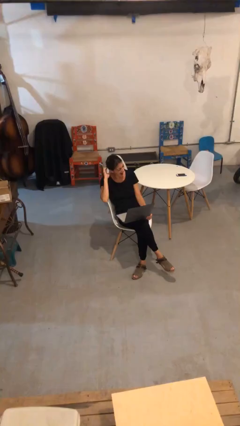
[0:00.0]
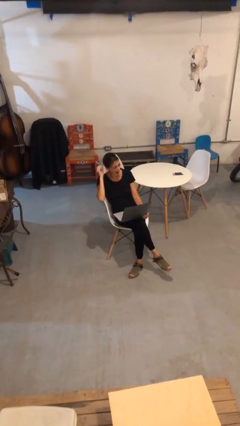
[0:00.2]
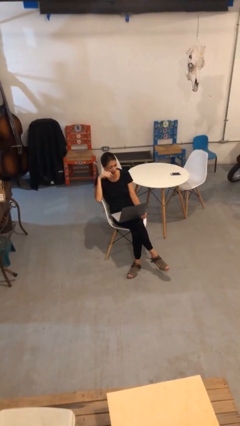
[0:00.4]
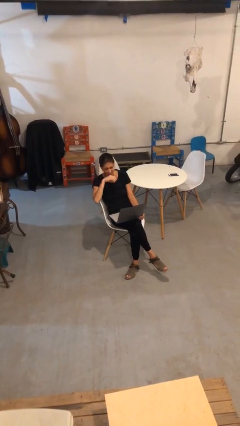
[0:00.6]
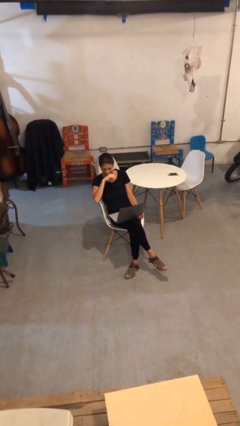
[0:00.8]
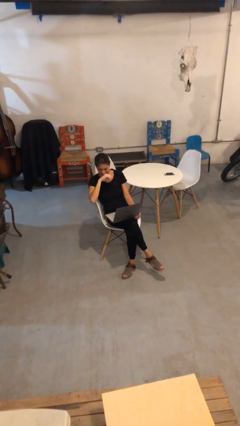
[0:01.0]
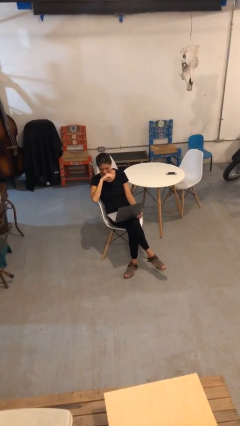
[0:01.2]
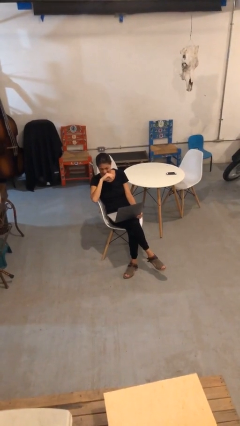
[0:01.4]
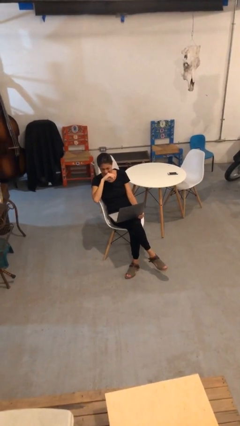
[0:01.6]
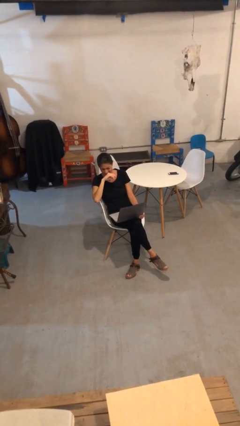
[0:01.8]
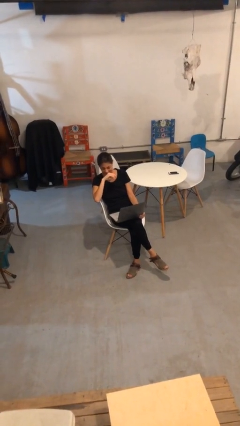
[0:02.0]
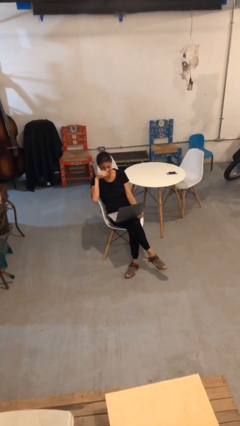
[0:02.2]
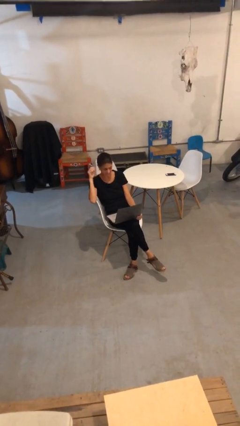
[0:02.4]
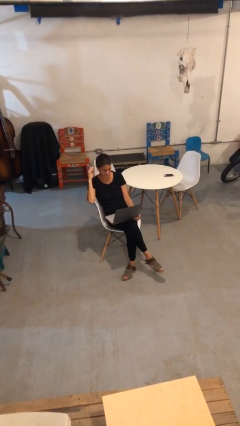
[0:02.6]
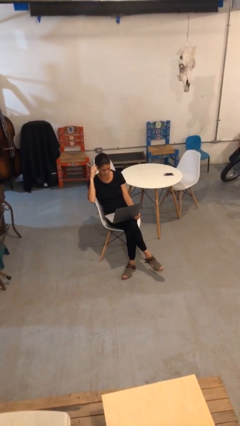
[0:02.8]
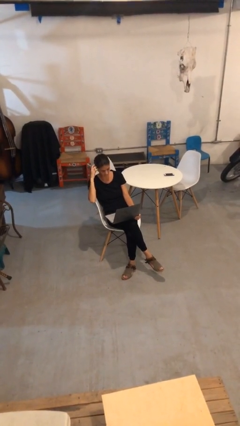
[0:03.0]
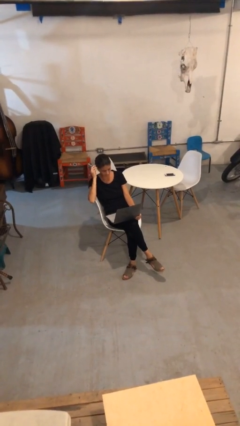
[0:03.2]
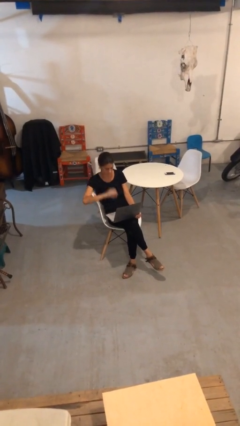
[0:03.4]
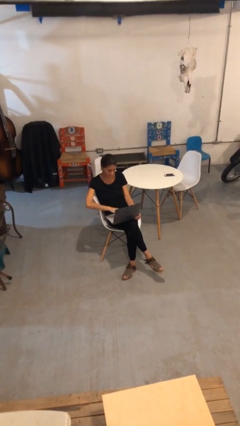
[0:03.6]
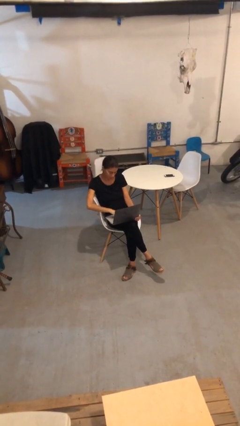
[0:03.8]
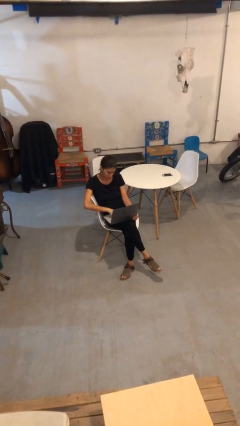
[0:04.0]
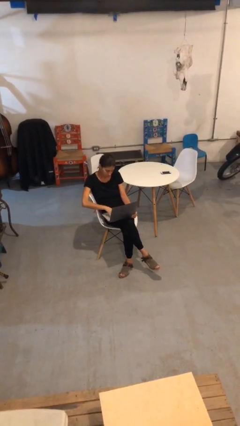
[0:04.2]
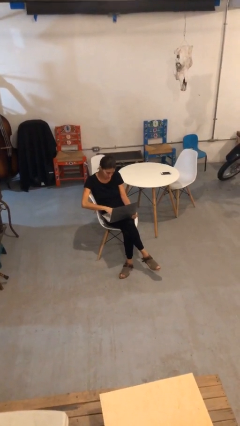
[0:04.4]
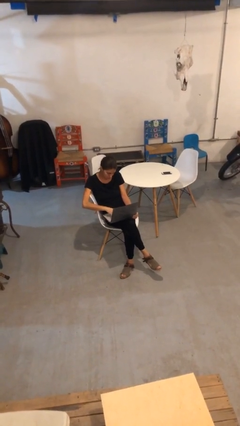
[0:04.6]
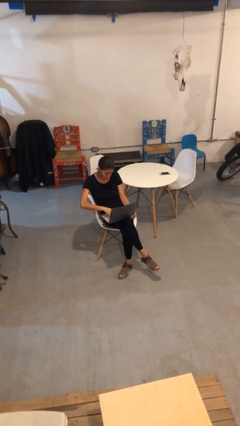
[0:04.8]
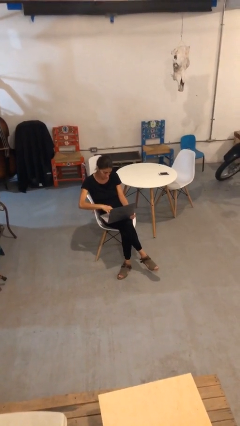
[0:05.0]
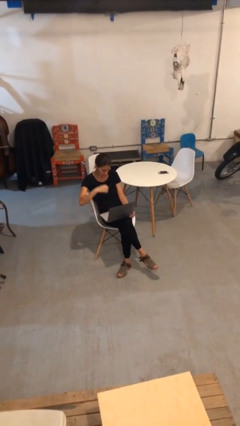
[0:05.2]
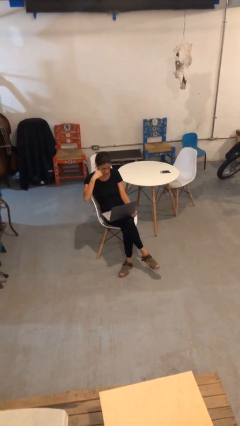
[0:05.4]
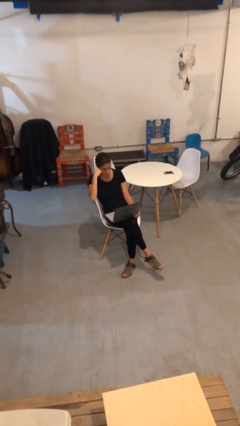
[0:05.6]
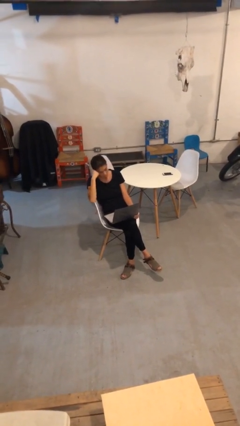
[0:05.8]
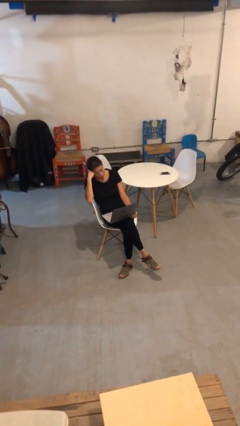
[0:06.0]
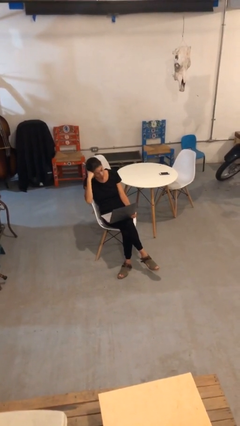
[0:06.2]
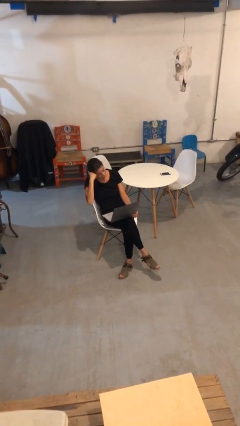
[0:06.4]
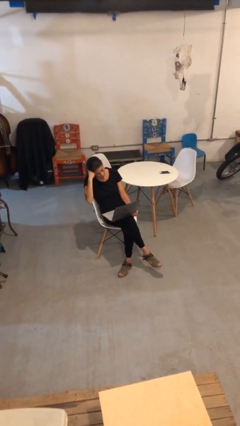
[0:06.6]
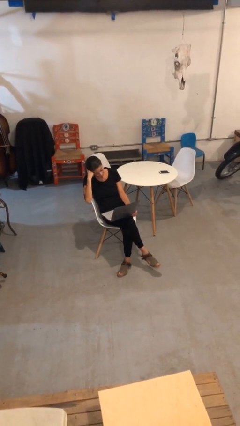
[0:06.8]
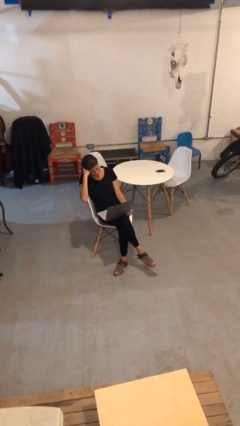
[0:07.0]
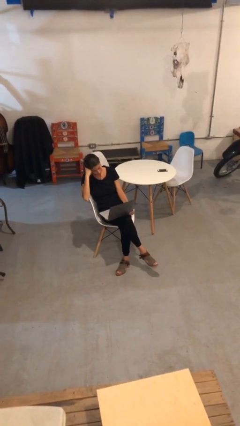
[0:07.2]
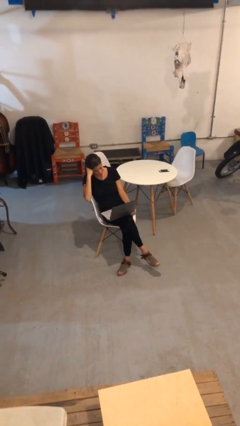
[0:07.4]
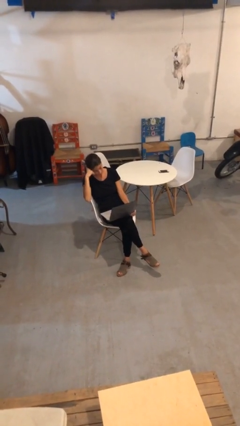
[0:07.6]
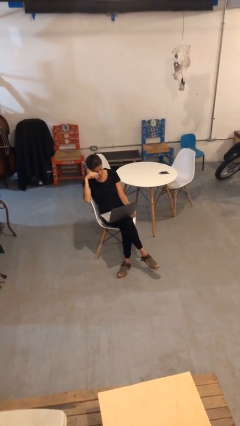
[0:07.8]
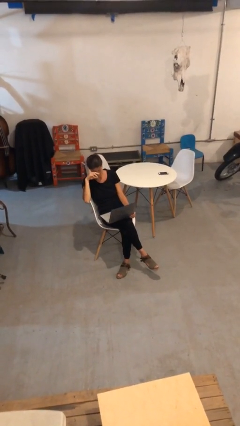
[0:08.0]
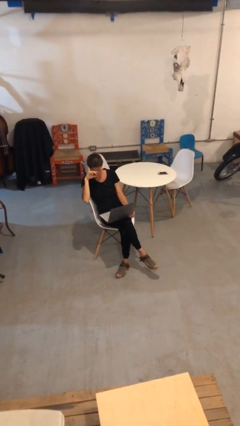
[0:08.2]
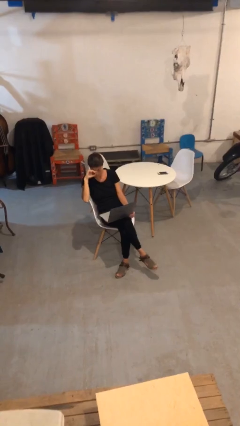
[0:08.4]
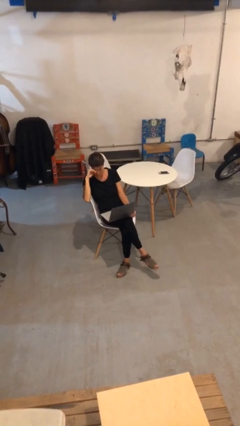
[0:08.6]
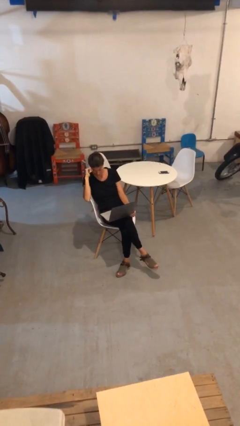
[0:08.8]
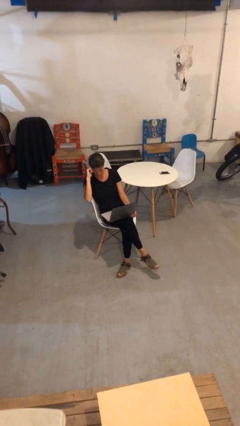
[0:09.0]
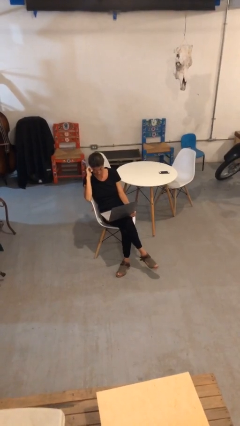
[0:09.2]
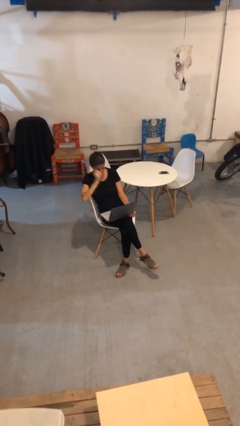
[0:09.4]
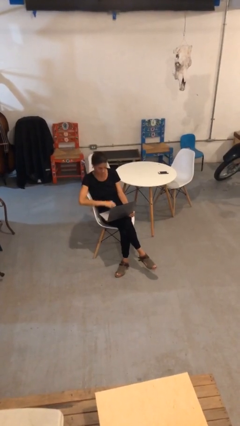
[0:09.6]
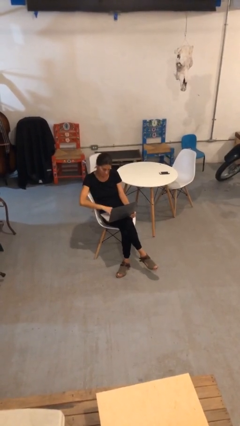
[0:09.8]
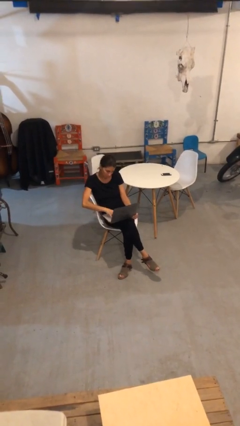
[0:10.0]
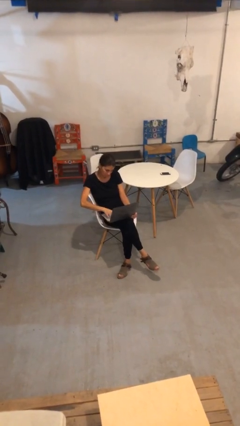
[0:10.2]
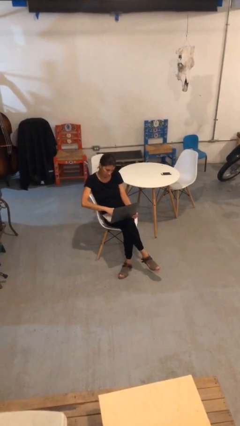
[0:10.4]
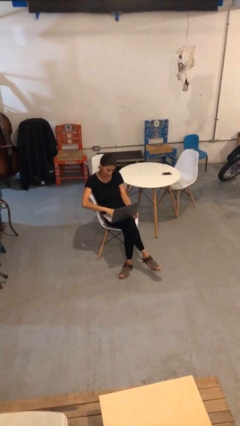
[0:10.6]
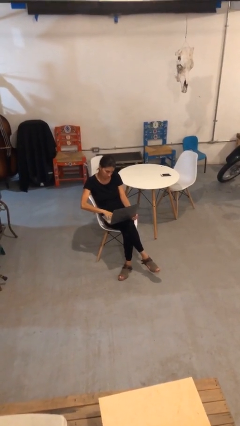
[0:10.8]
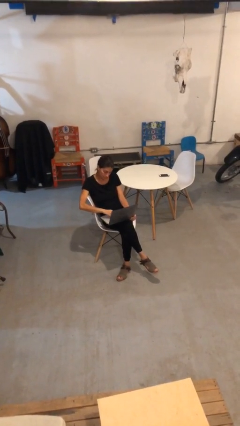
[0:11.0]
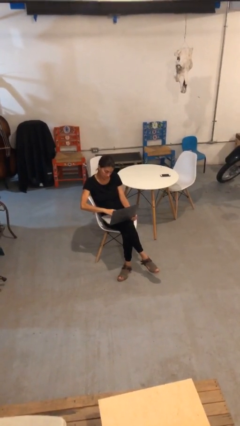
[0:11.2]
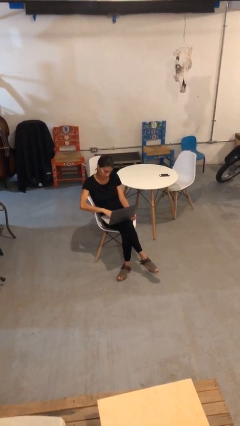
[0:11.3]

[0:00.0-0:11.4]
person interacts with laptop

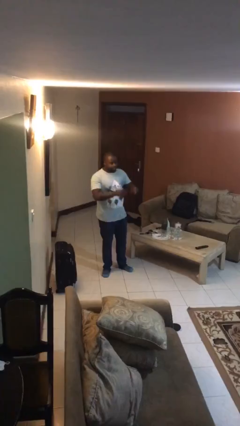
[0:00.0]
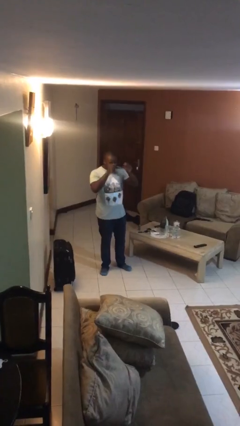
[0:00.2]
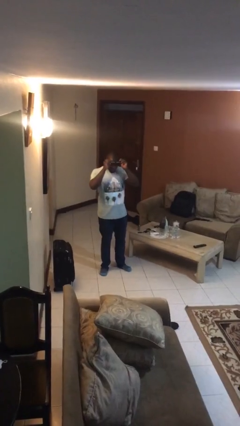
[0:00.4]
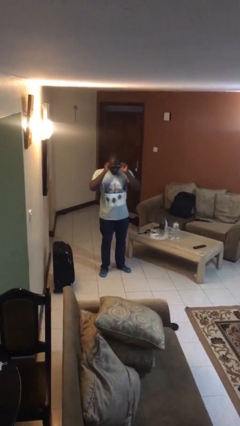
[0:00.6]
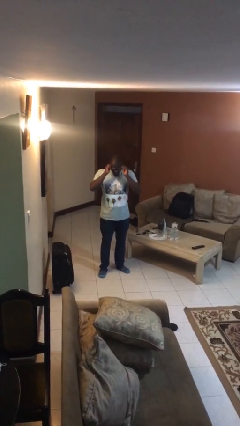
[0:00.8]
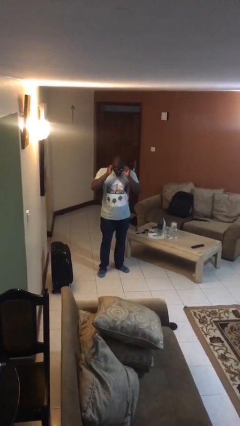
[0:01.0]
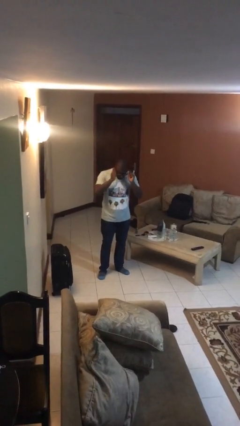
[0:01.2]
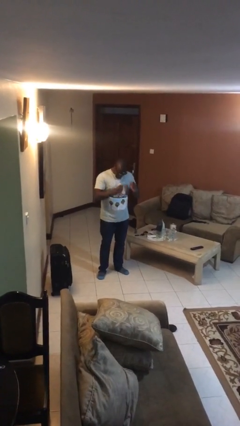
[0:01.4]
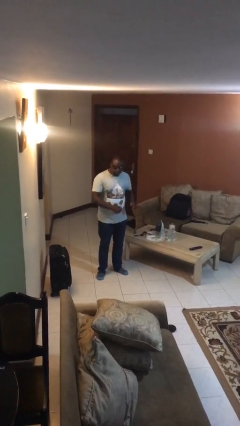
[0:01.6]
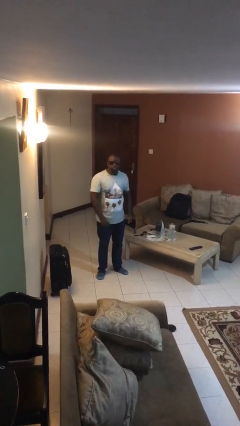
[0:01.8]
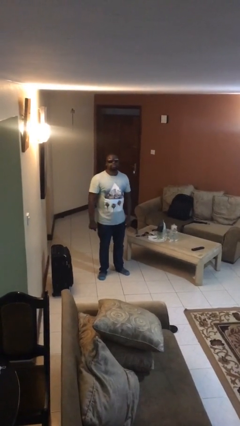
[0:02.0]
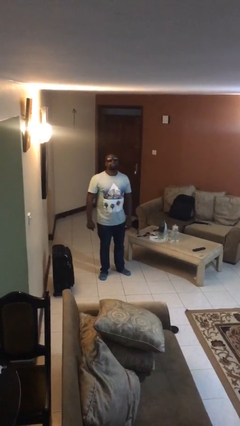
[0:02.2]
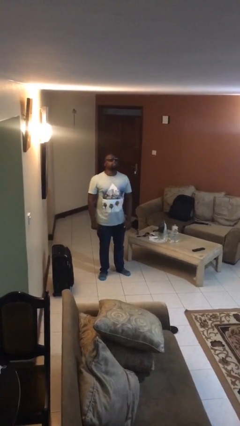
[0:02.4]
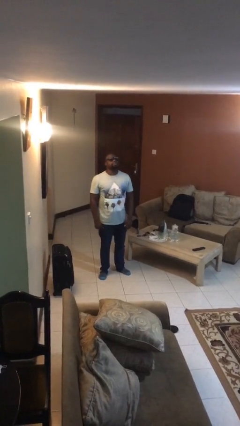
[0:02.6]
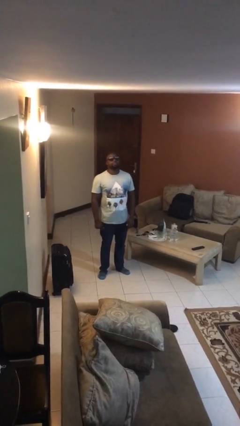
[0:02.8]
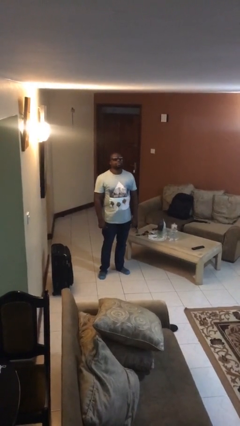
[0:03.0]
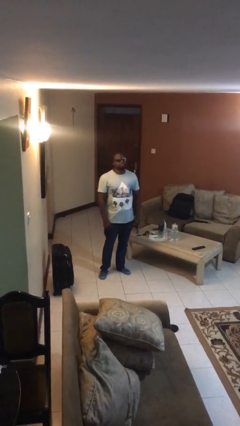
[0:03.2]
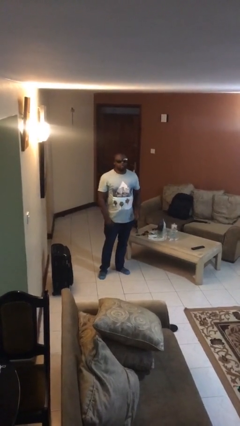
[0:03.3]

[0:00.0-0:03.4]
person puts on sunglasses

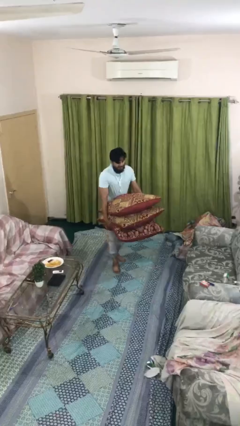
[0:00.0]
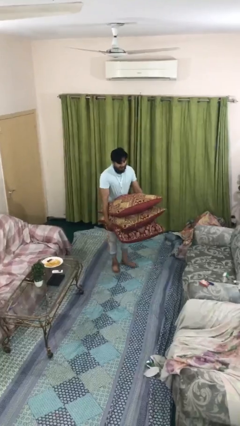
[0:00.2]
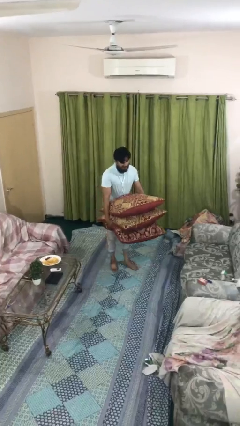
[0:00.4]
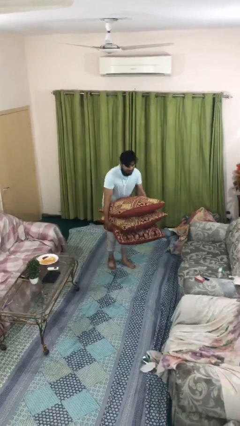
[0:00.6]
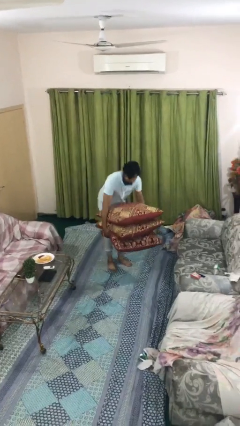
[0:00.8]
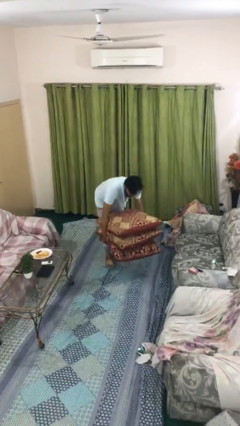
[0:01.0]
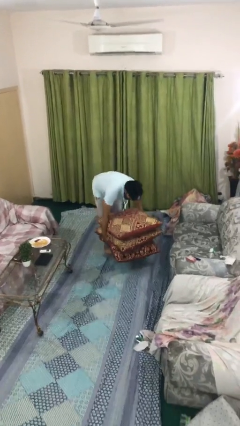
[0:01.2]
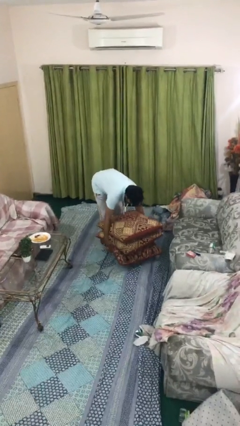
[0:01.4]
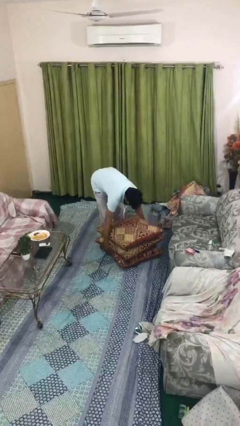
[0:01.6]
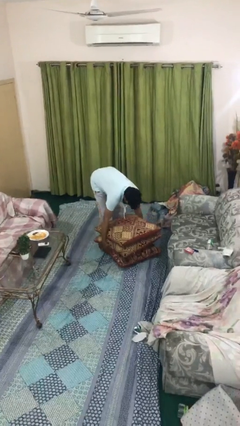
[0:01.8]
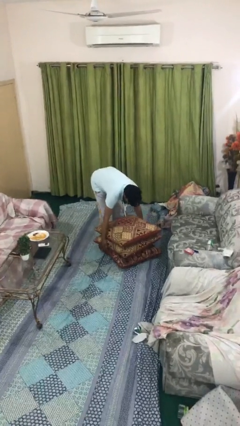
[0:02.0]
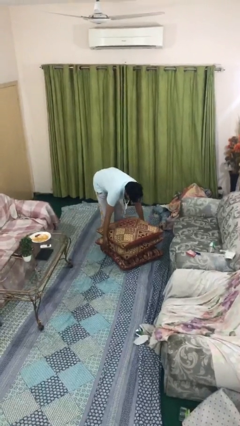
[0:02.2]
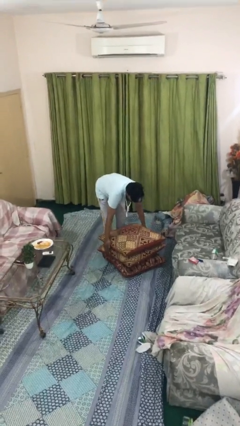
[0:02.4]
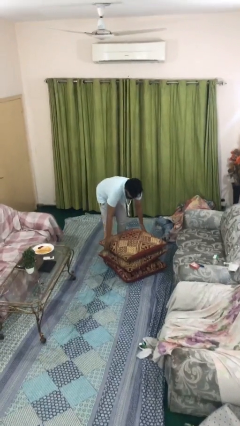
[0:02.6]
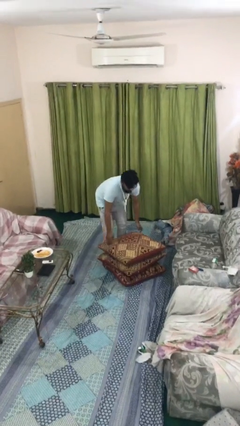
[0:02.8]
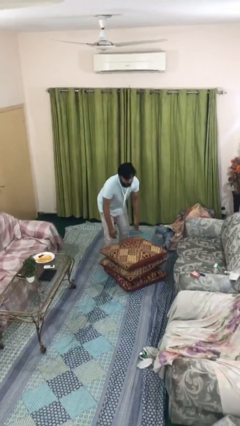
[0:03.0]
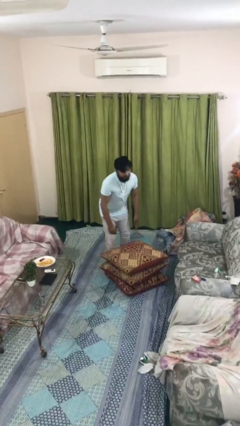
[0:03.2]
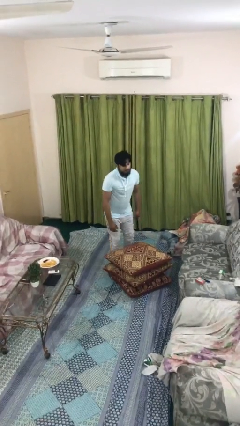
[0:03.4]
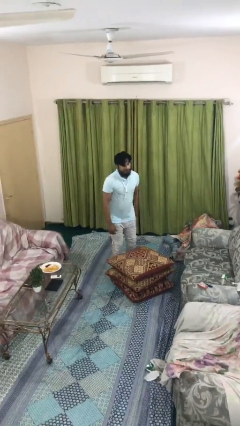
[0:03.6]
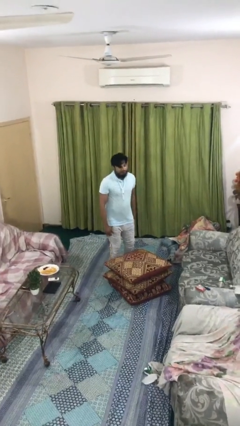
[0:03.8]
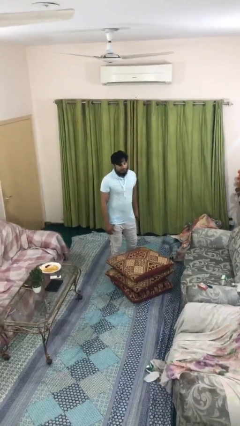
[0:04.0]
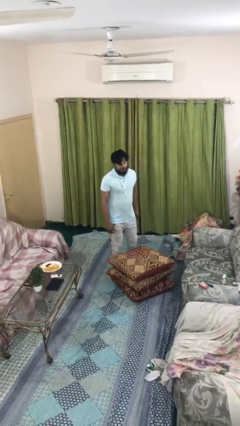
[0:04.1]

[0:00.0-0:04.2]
person puts down object on floor
